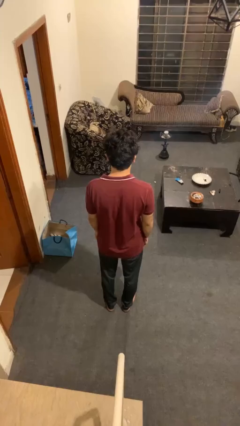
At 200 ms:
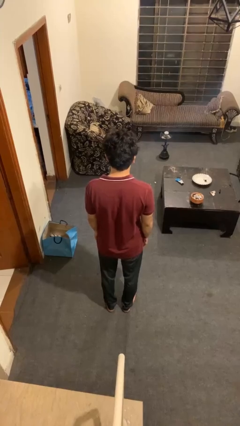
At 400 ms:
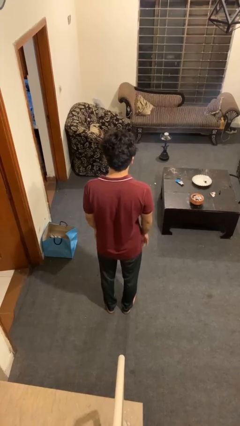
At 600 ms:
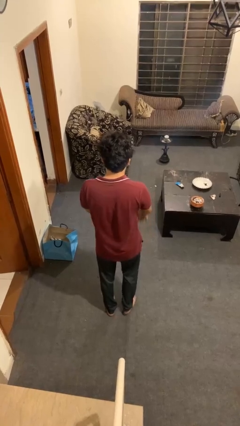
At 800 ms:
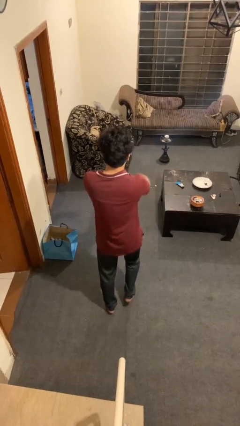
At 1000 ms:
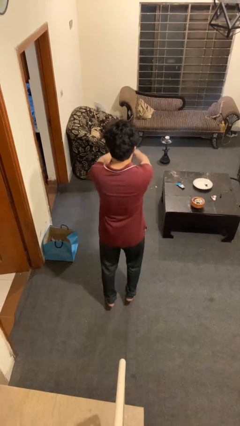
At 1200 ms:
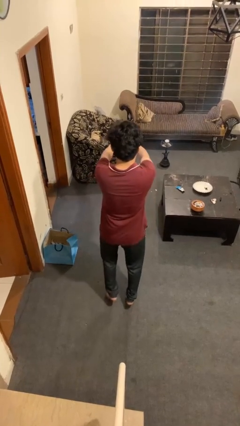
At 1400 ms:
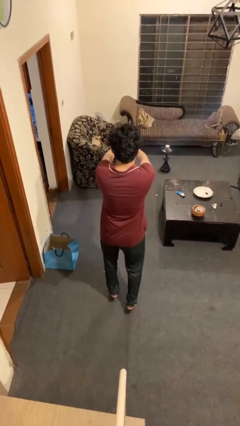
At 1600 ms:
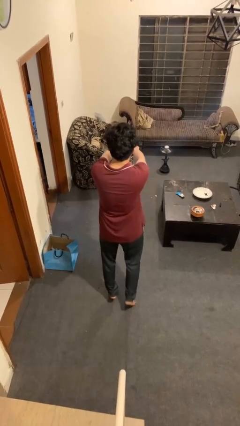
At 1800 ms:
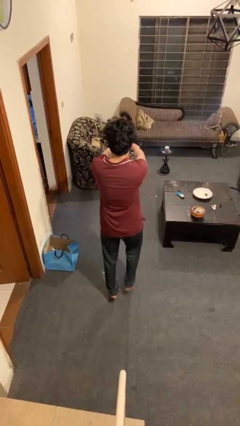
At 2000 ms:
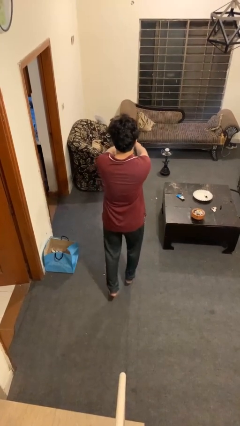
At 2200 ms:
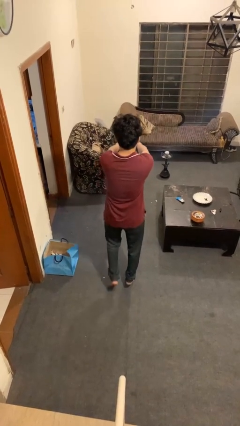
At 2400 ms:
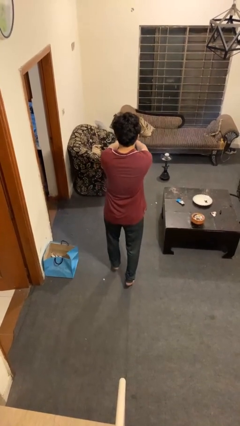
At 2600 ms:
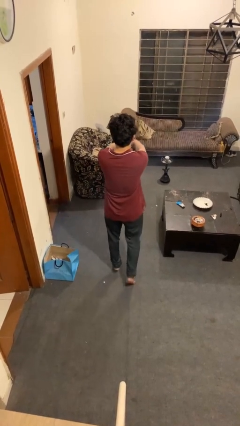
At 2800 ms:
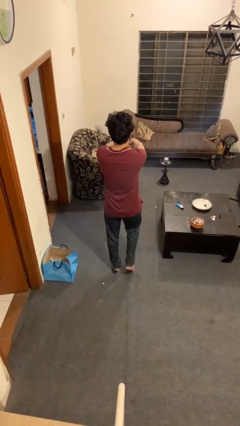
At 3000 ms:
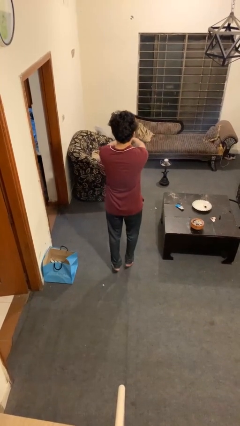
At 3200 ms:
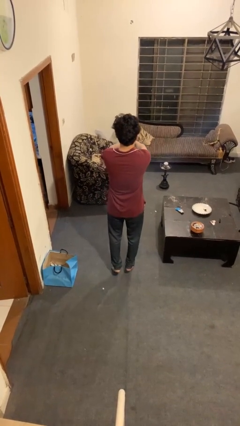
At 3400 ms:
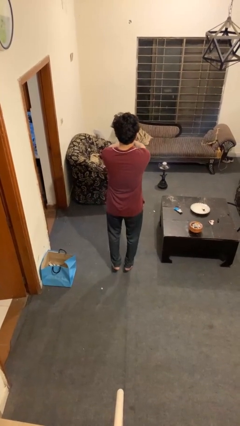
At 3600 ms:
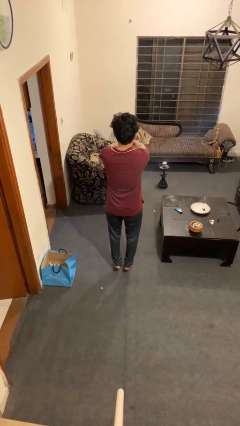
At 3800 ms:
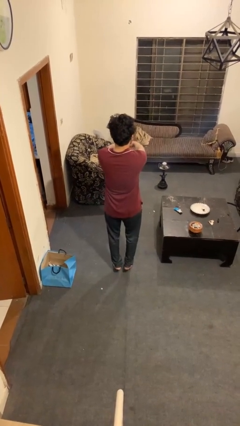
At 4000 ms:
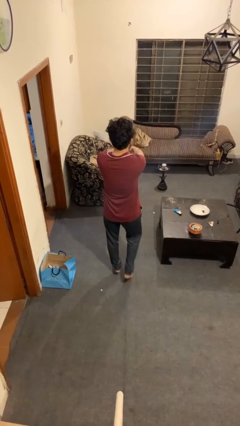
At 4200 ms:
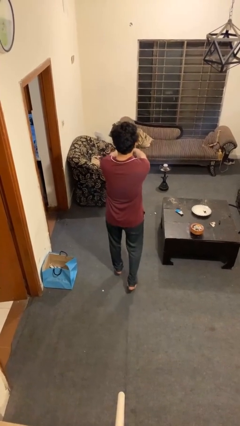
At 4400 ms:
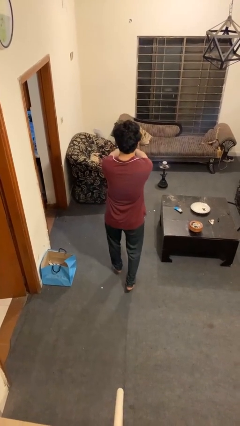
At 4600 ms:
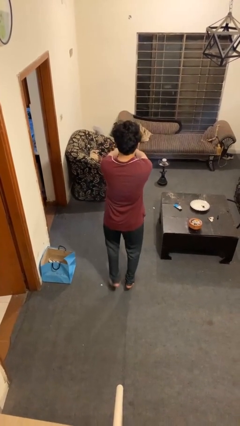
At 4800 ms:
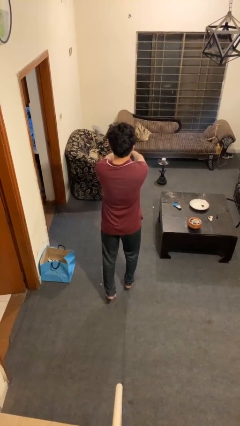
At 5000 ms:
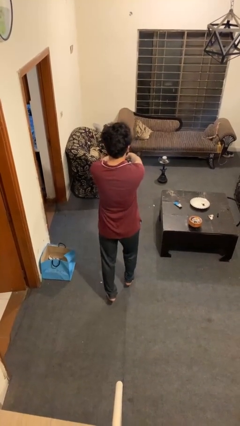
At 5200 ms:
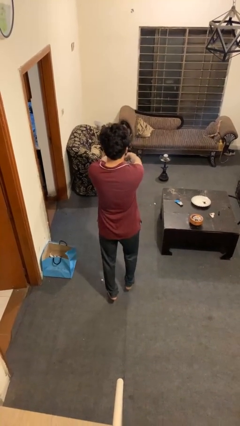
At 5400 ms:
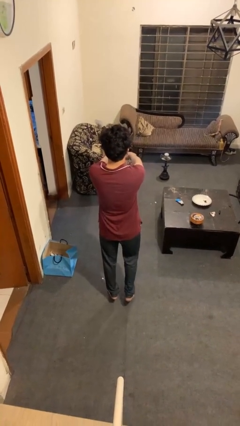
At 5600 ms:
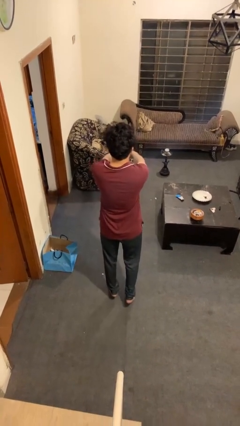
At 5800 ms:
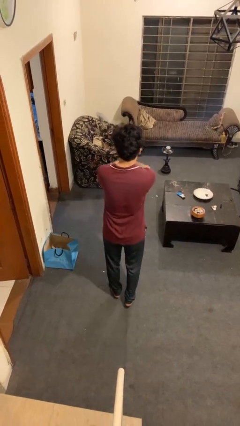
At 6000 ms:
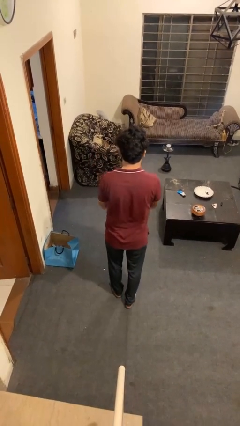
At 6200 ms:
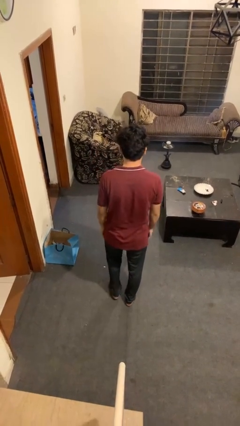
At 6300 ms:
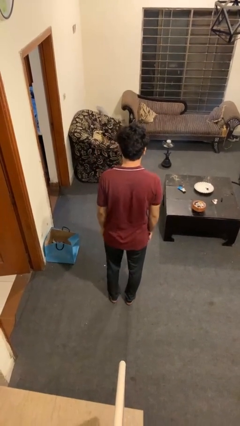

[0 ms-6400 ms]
person walks tiptoe

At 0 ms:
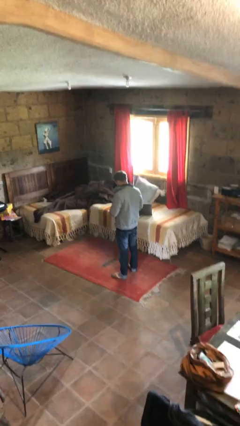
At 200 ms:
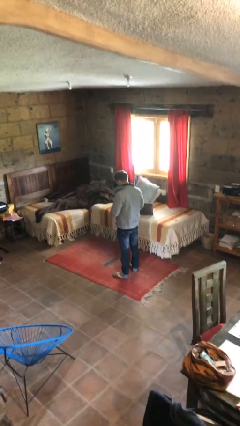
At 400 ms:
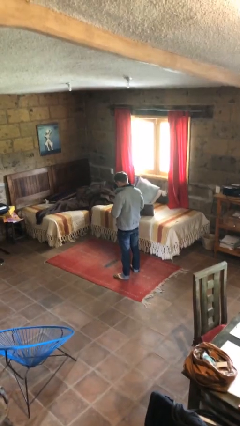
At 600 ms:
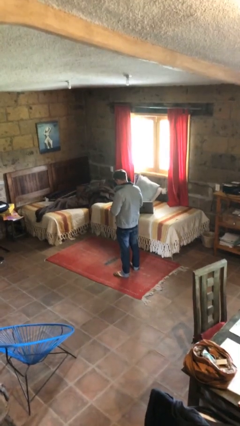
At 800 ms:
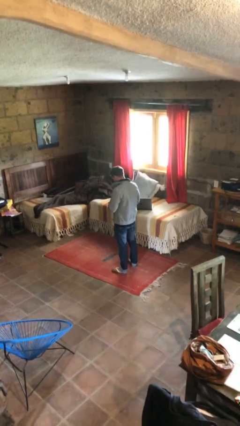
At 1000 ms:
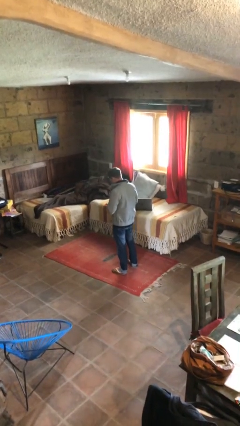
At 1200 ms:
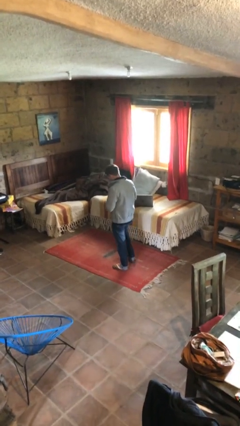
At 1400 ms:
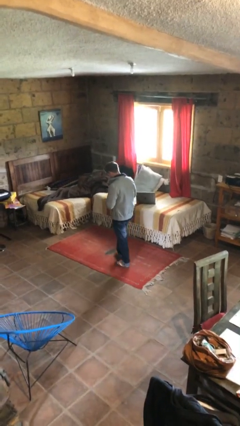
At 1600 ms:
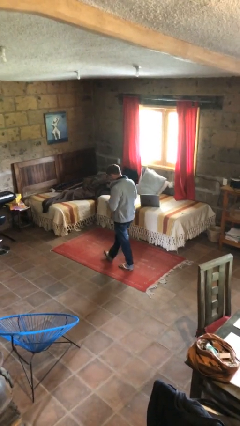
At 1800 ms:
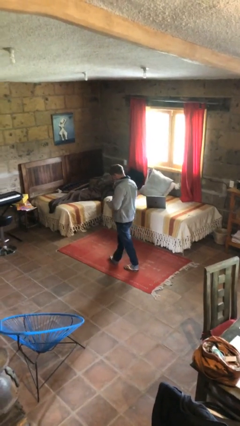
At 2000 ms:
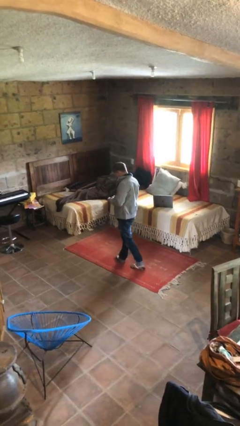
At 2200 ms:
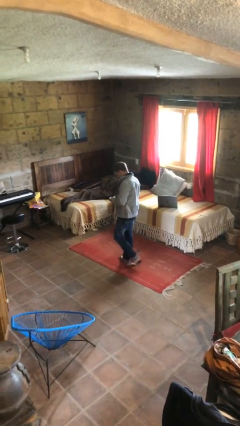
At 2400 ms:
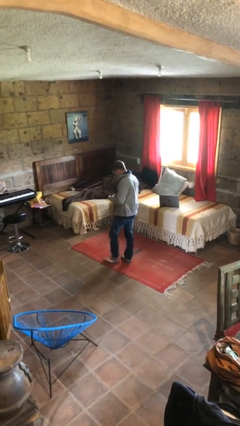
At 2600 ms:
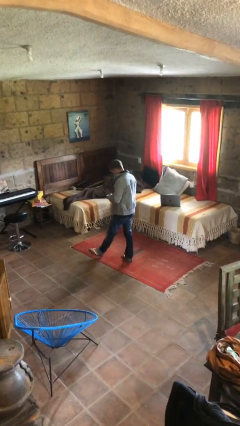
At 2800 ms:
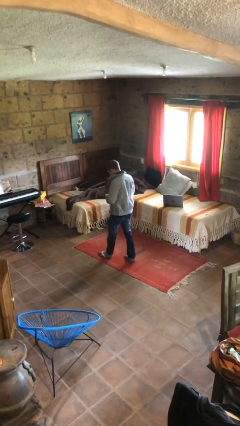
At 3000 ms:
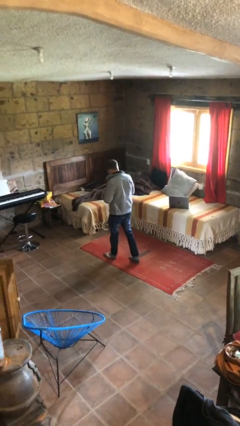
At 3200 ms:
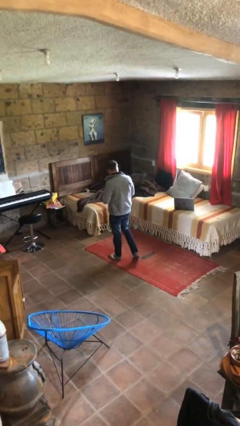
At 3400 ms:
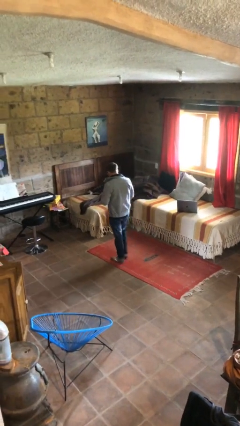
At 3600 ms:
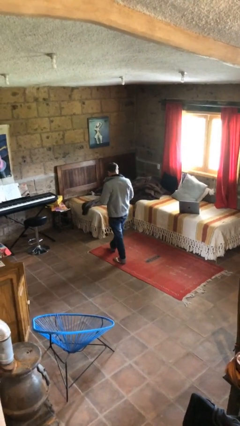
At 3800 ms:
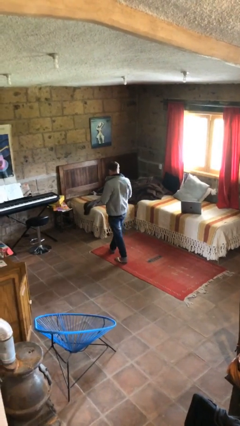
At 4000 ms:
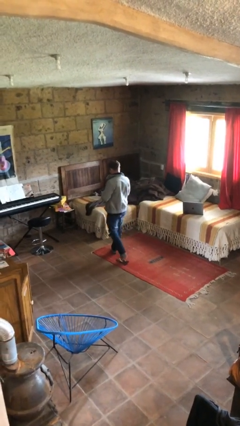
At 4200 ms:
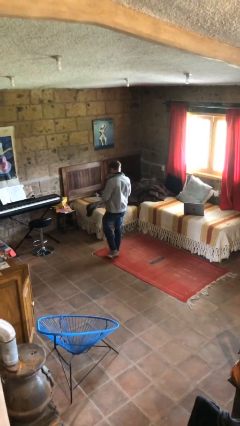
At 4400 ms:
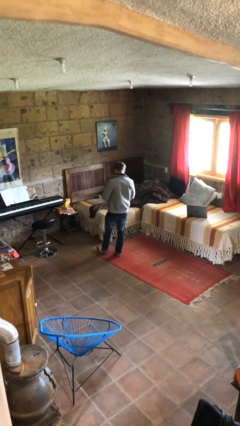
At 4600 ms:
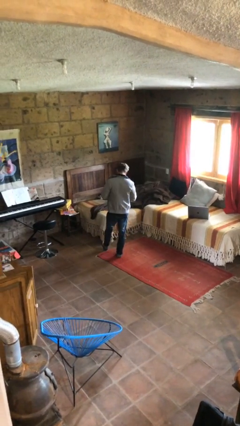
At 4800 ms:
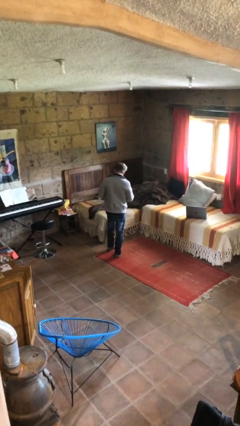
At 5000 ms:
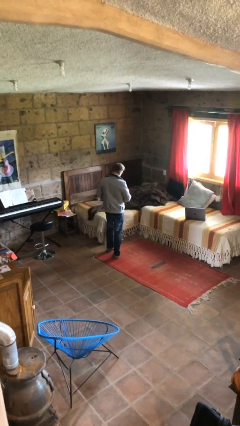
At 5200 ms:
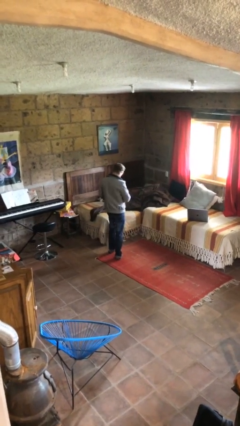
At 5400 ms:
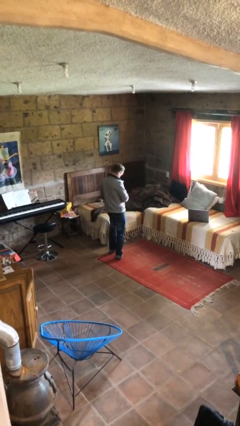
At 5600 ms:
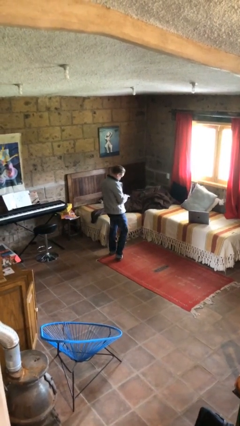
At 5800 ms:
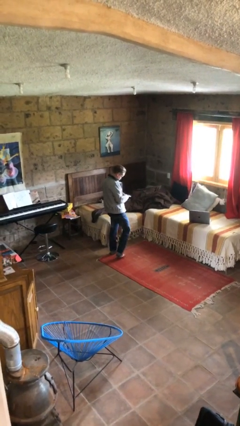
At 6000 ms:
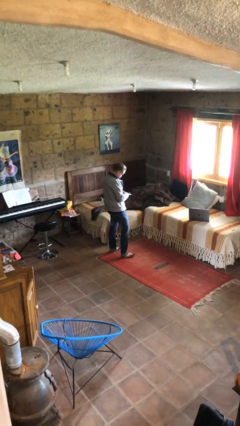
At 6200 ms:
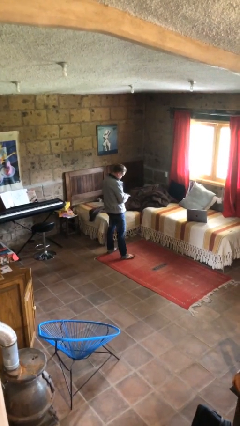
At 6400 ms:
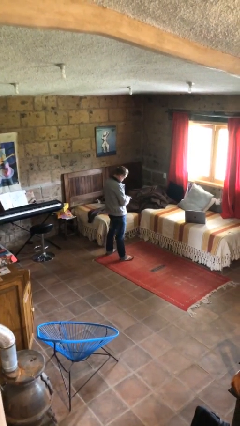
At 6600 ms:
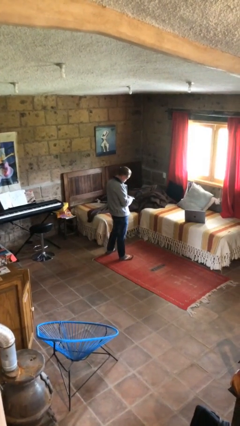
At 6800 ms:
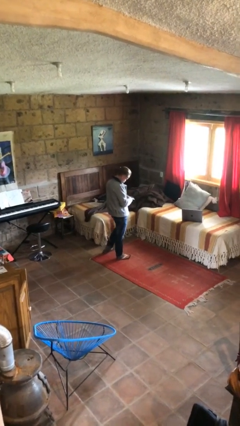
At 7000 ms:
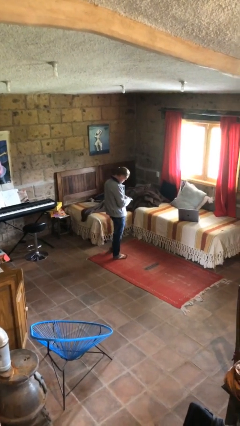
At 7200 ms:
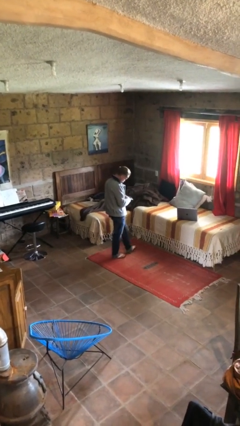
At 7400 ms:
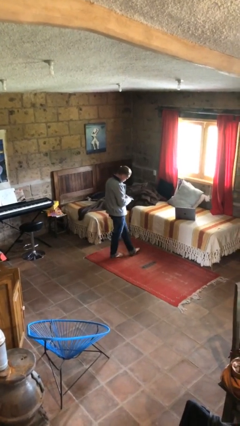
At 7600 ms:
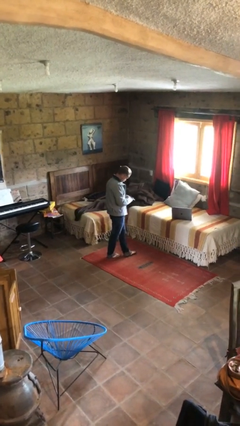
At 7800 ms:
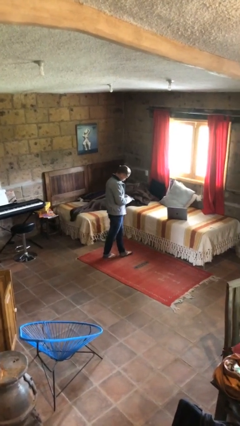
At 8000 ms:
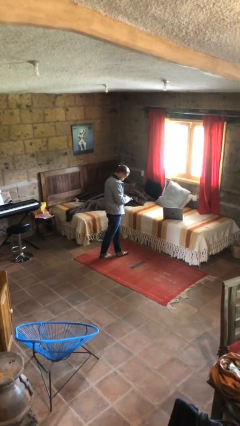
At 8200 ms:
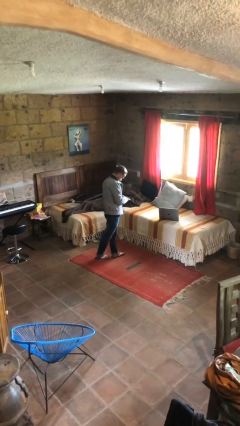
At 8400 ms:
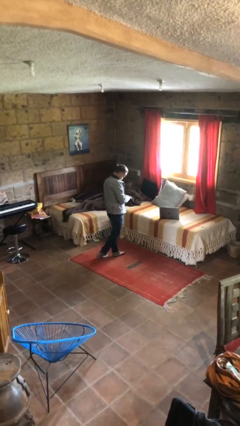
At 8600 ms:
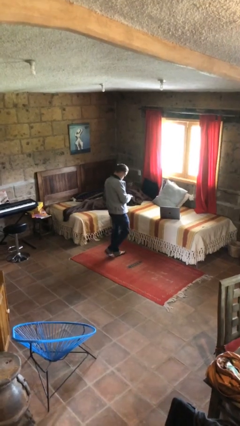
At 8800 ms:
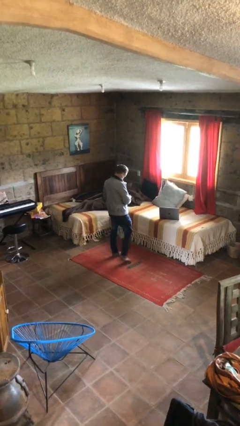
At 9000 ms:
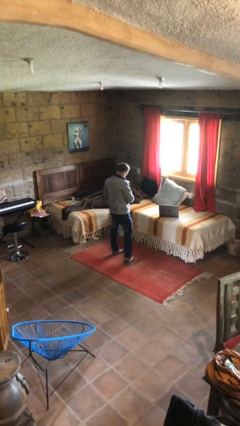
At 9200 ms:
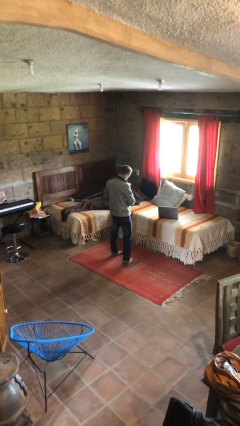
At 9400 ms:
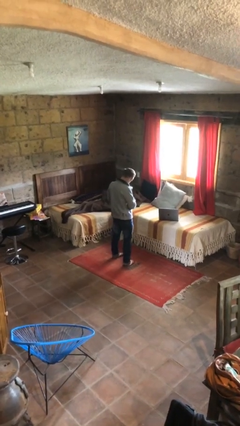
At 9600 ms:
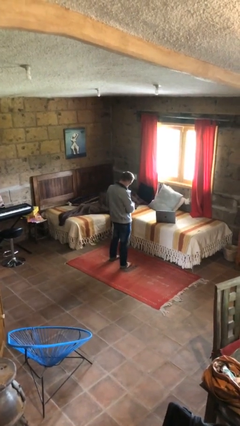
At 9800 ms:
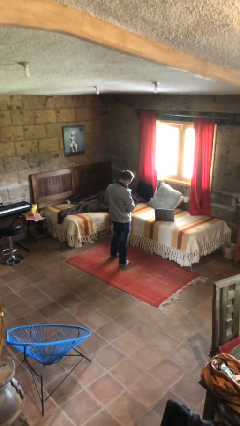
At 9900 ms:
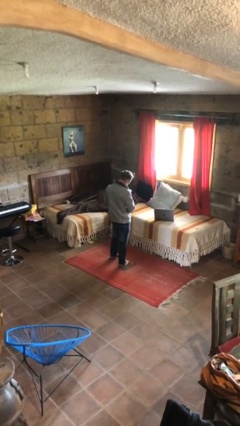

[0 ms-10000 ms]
person texts on phone

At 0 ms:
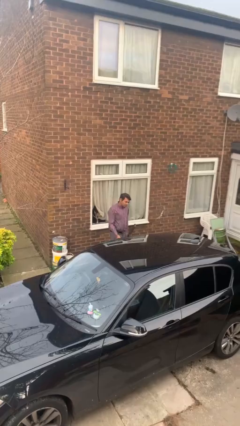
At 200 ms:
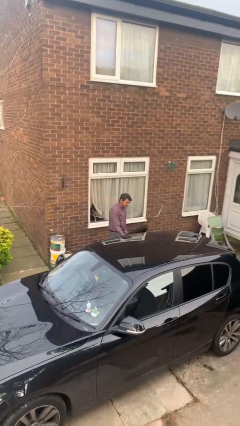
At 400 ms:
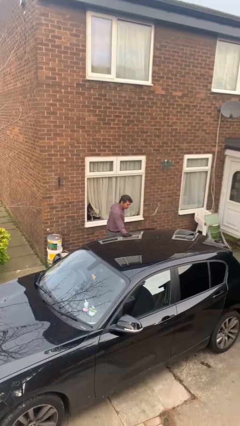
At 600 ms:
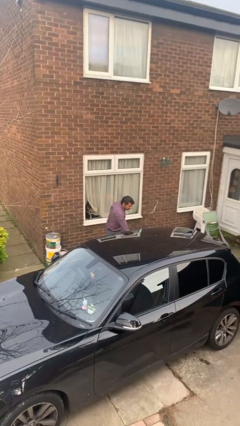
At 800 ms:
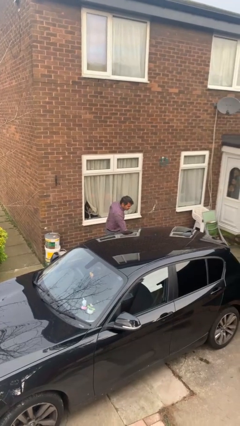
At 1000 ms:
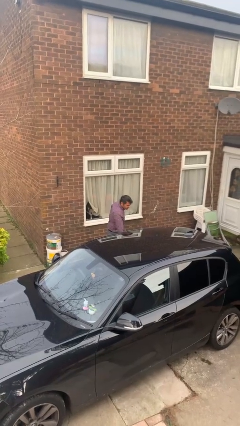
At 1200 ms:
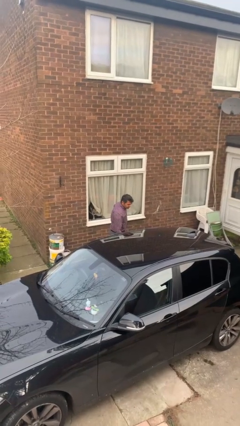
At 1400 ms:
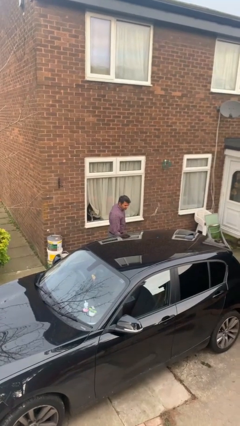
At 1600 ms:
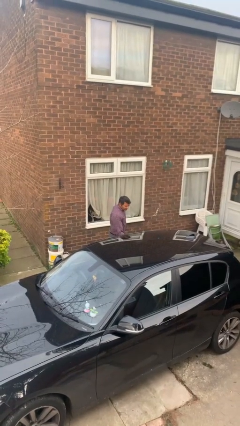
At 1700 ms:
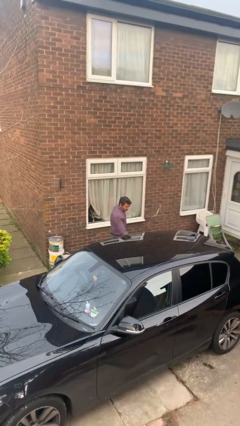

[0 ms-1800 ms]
person closes car door

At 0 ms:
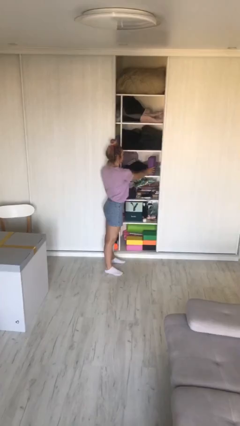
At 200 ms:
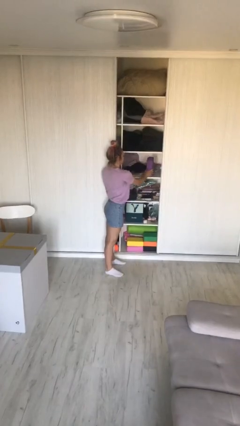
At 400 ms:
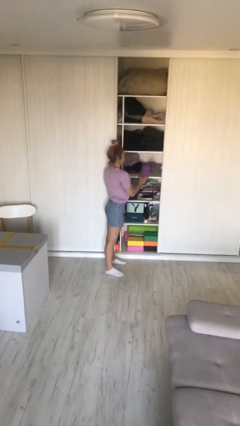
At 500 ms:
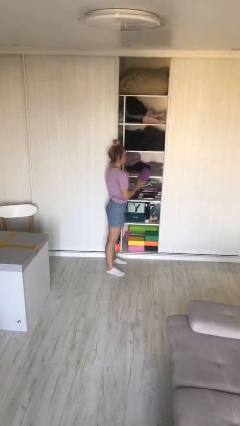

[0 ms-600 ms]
person picks up object from cabinet
